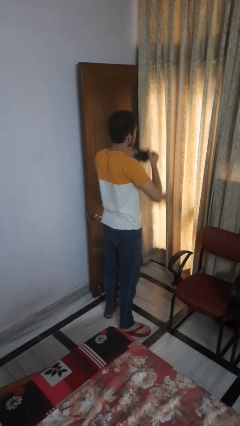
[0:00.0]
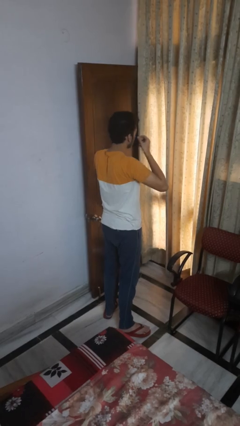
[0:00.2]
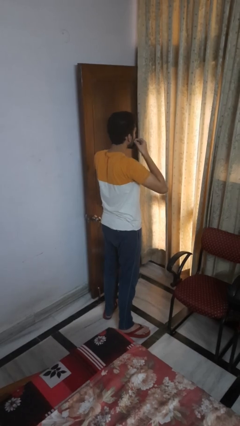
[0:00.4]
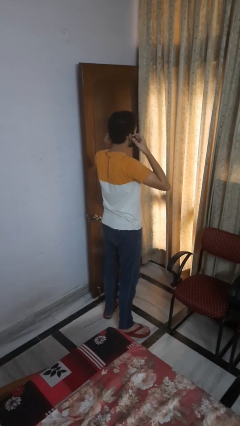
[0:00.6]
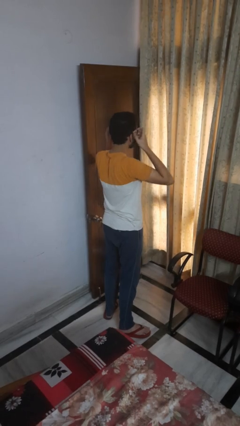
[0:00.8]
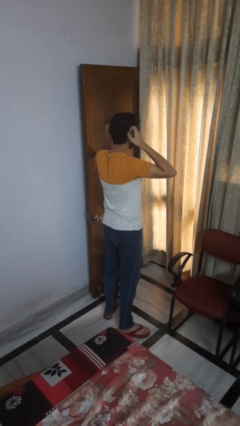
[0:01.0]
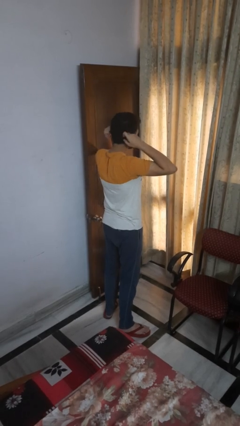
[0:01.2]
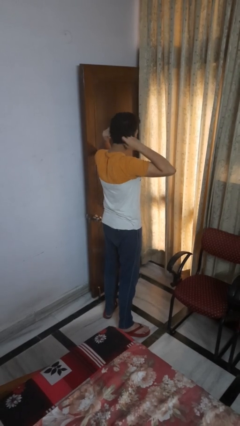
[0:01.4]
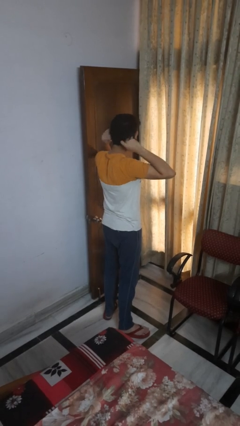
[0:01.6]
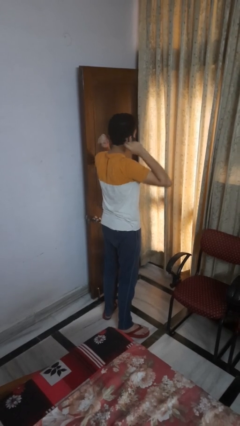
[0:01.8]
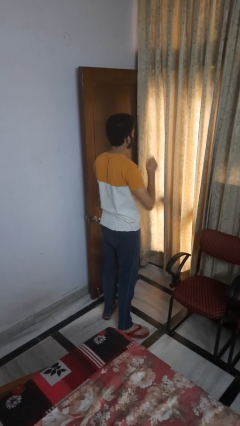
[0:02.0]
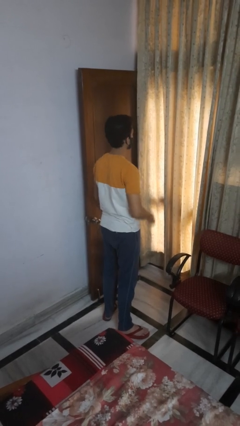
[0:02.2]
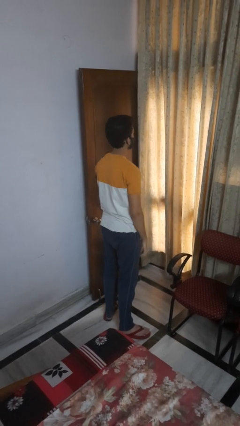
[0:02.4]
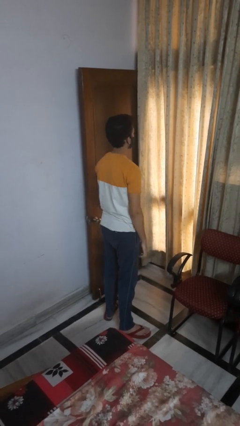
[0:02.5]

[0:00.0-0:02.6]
person puts on facemask

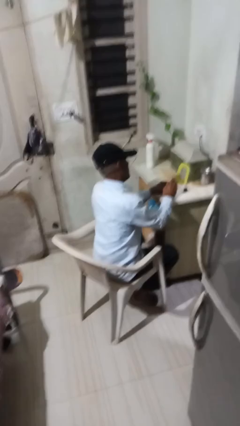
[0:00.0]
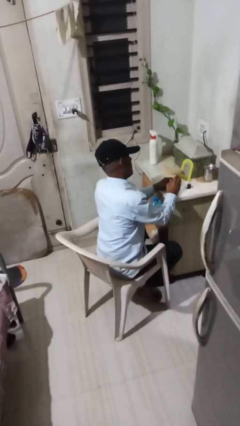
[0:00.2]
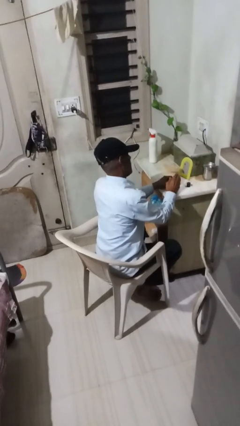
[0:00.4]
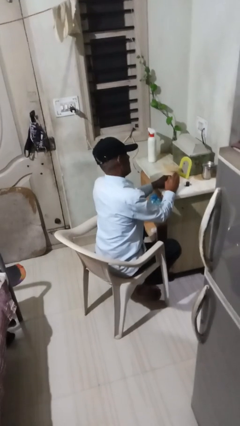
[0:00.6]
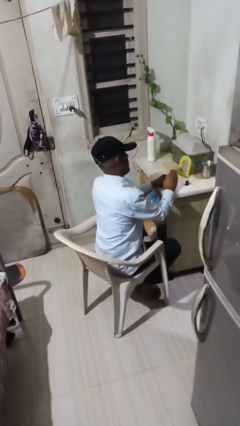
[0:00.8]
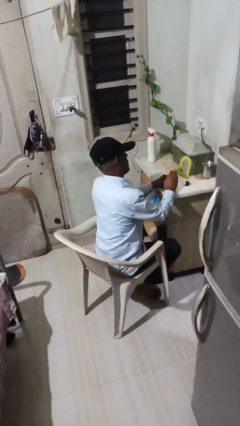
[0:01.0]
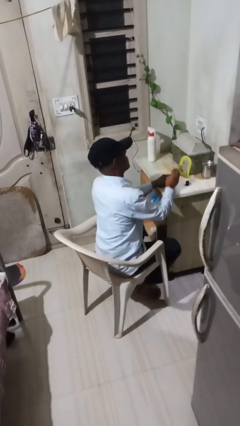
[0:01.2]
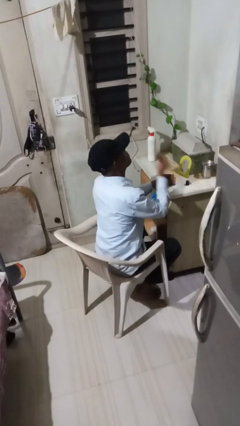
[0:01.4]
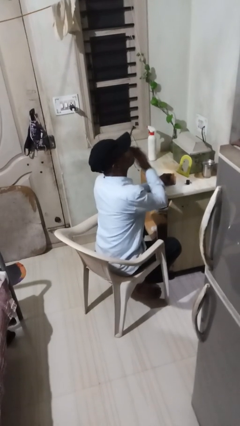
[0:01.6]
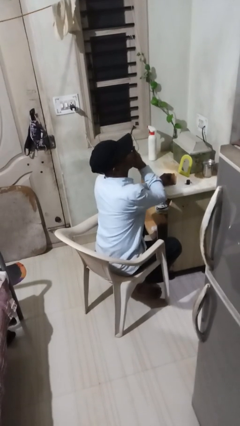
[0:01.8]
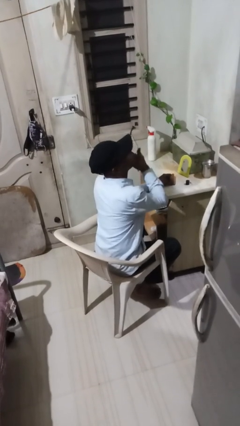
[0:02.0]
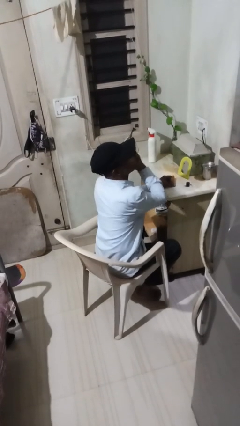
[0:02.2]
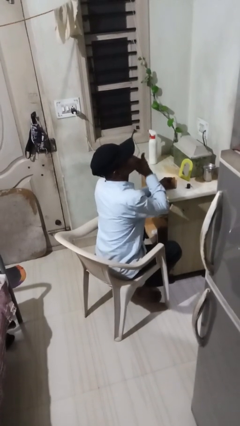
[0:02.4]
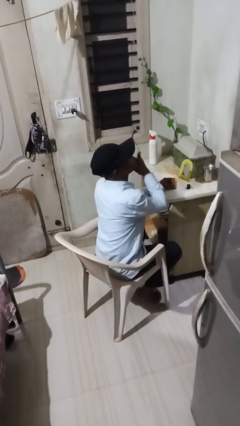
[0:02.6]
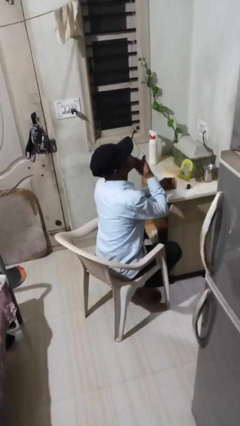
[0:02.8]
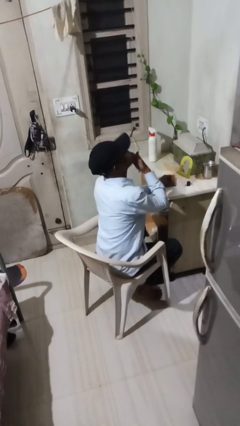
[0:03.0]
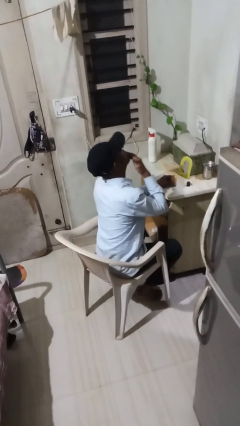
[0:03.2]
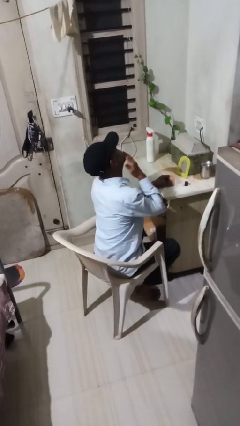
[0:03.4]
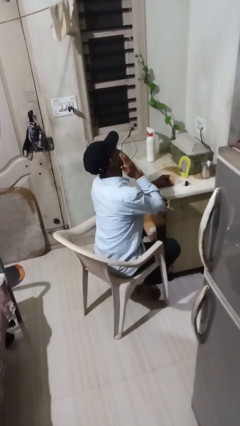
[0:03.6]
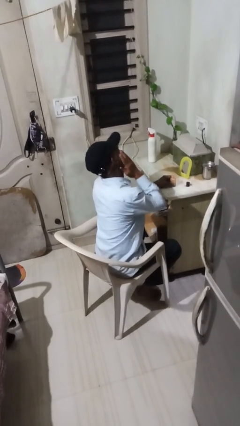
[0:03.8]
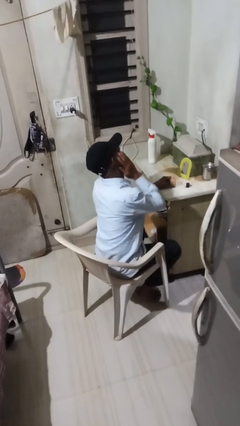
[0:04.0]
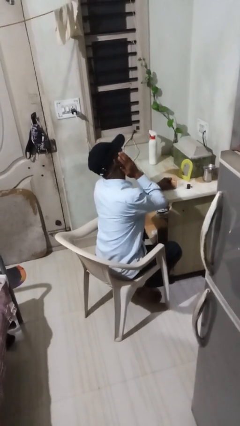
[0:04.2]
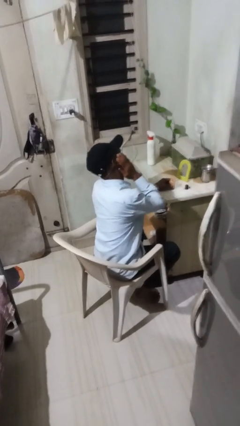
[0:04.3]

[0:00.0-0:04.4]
person applies foundation makeup

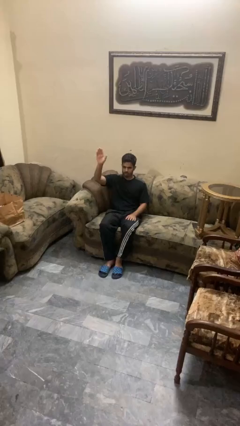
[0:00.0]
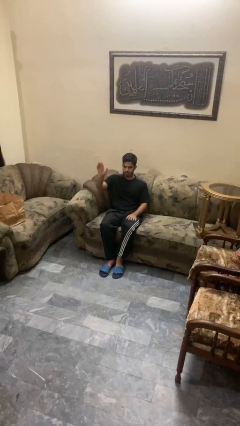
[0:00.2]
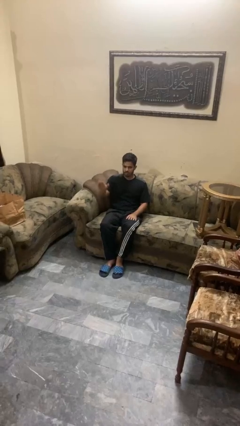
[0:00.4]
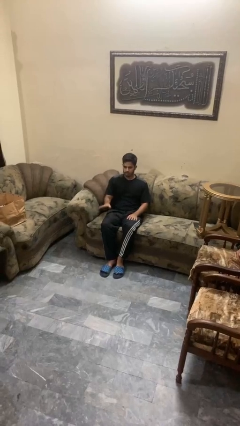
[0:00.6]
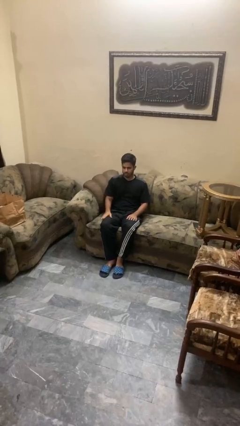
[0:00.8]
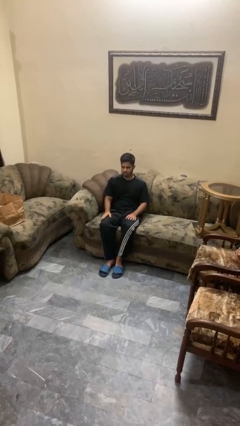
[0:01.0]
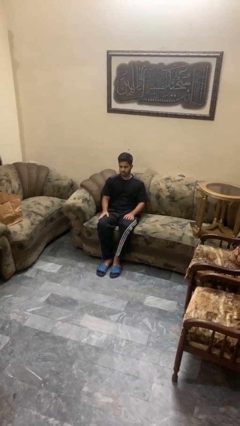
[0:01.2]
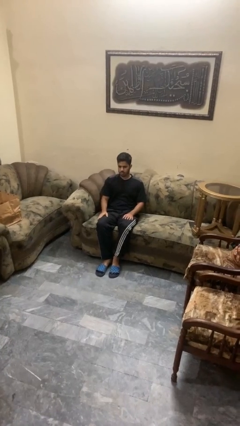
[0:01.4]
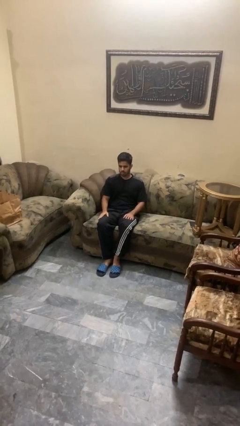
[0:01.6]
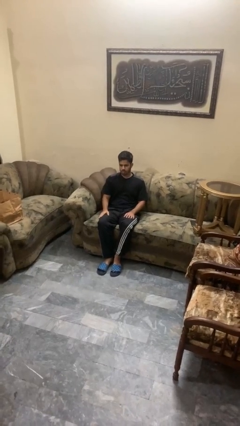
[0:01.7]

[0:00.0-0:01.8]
person gestures lower hand

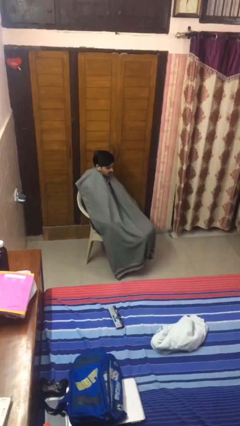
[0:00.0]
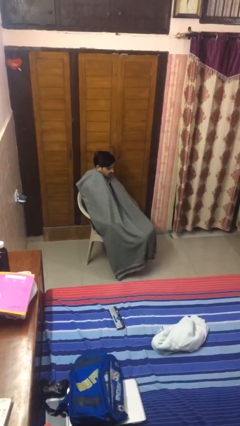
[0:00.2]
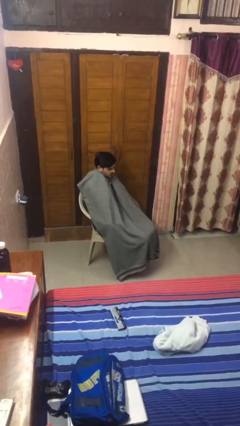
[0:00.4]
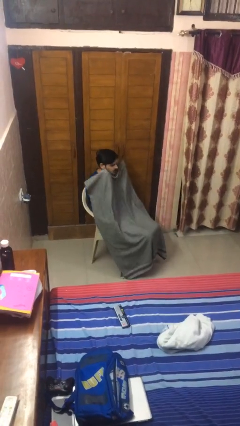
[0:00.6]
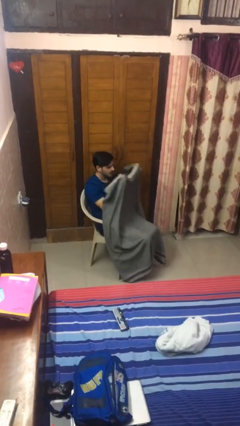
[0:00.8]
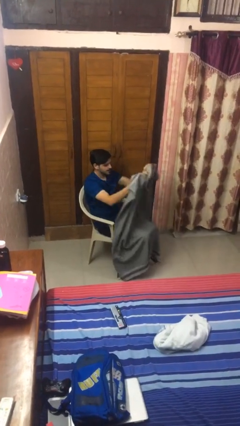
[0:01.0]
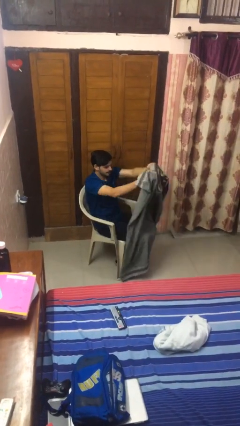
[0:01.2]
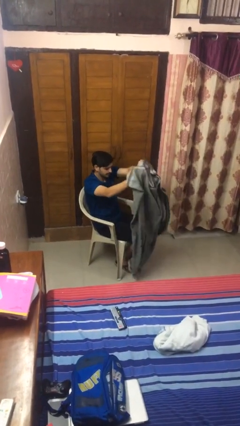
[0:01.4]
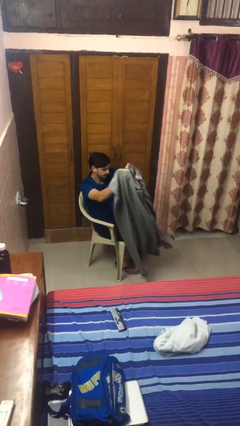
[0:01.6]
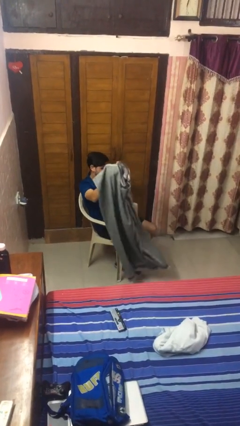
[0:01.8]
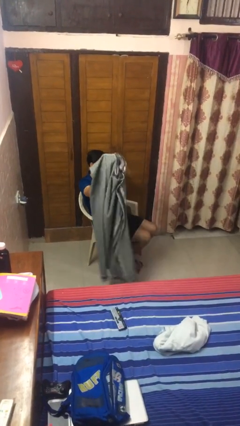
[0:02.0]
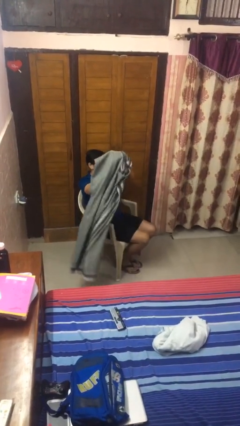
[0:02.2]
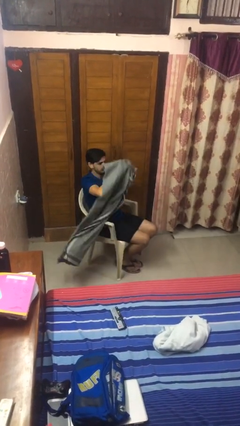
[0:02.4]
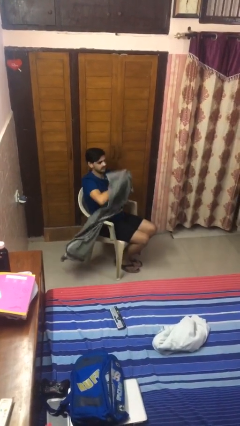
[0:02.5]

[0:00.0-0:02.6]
person uncovers with blanket

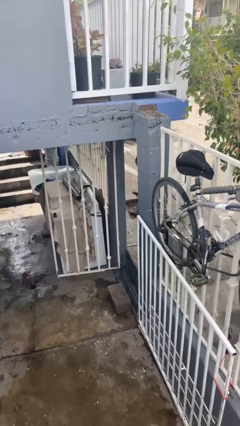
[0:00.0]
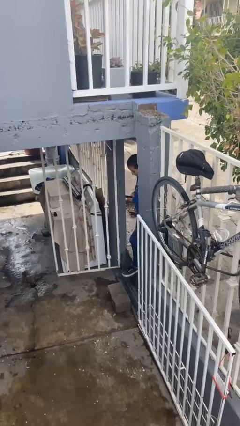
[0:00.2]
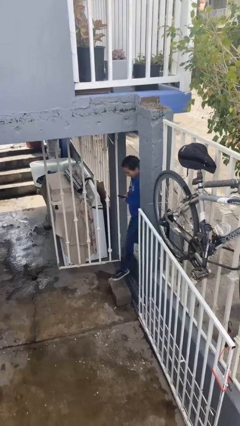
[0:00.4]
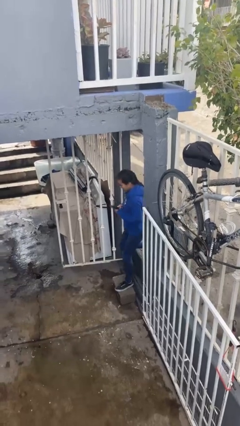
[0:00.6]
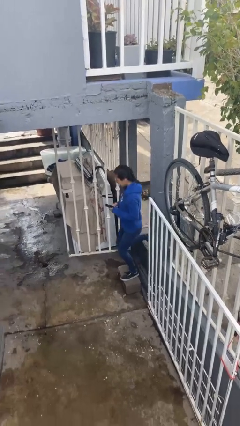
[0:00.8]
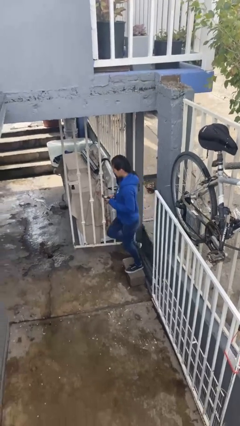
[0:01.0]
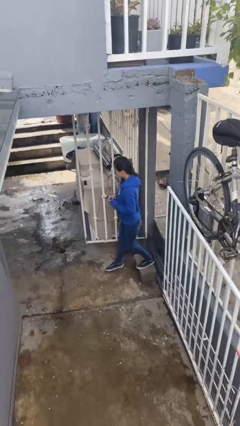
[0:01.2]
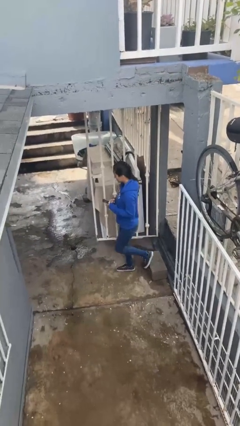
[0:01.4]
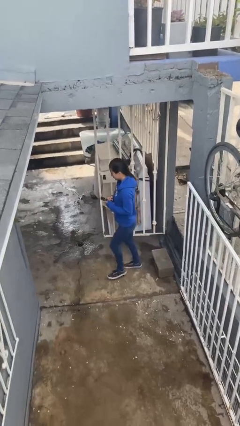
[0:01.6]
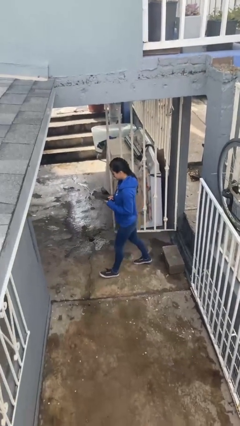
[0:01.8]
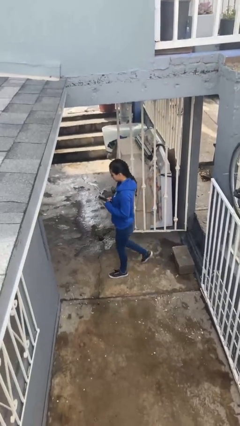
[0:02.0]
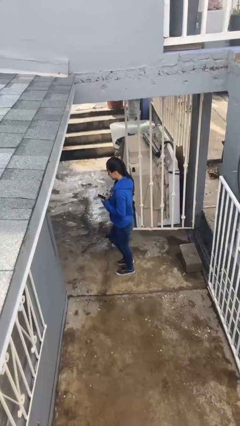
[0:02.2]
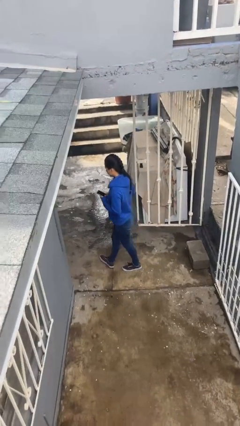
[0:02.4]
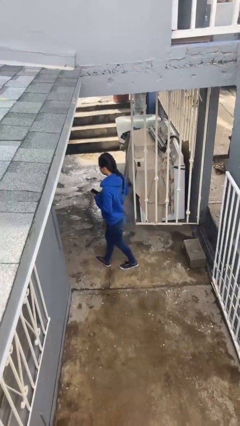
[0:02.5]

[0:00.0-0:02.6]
person enters scene through structure

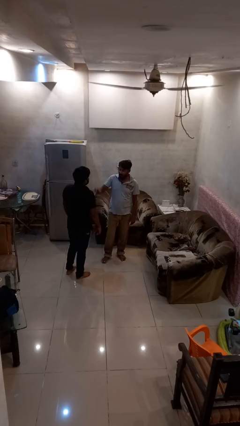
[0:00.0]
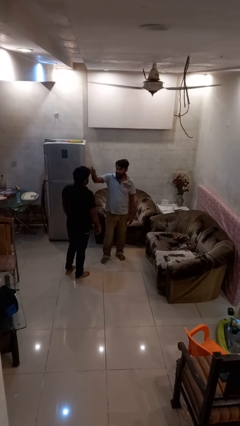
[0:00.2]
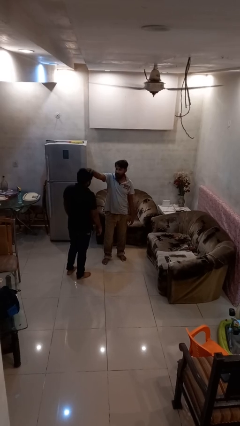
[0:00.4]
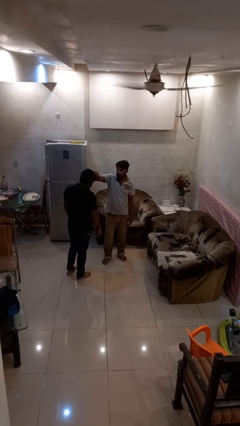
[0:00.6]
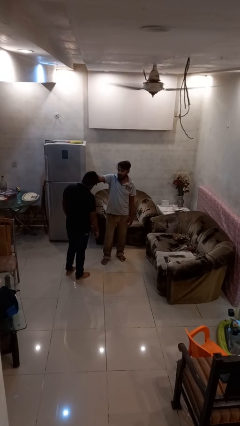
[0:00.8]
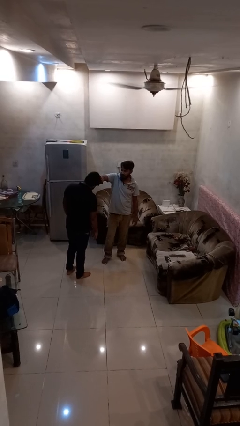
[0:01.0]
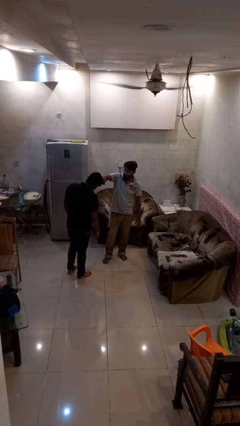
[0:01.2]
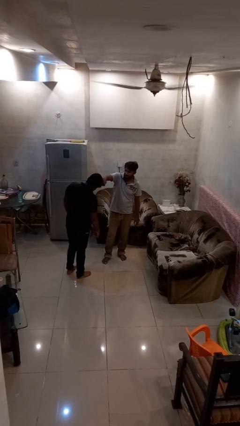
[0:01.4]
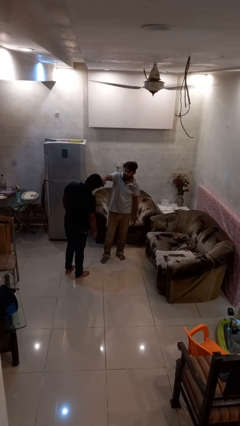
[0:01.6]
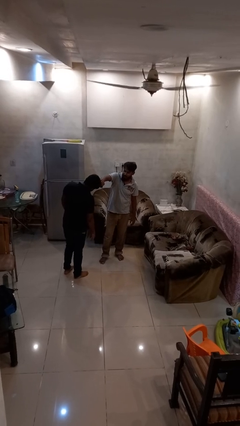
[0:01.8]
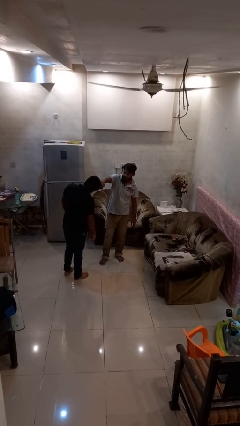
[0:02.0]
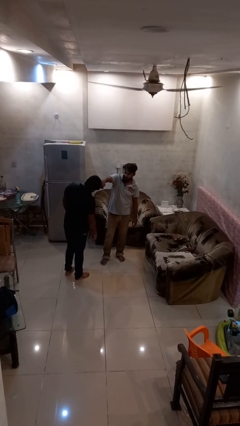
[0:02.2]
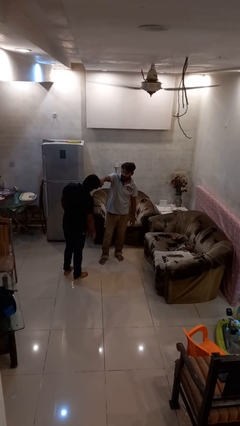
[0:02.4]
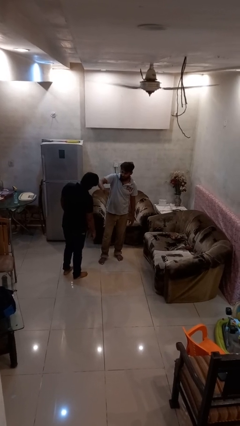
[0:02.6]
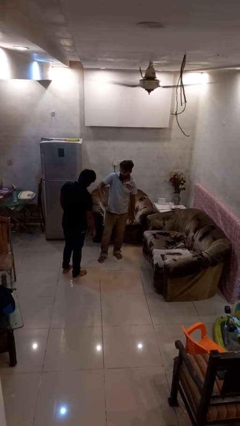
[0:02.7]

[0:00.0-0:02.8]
person grabs person by hair

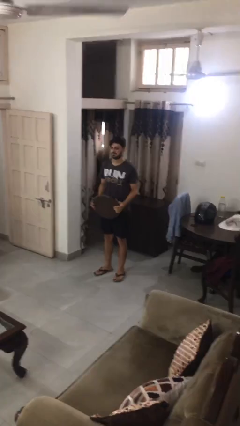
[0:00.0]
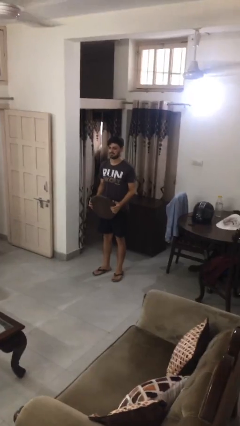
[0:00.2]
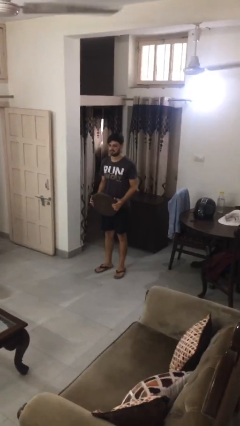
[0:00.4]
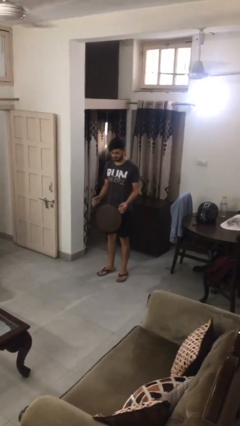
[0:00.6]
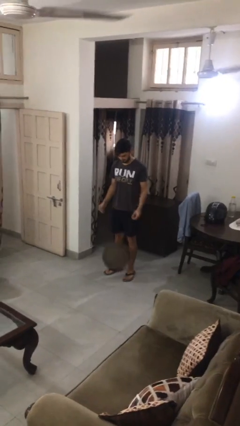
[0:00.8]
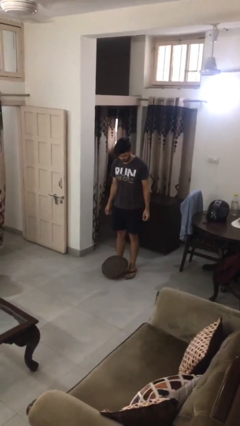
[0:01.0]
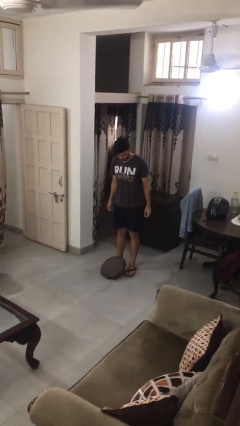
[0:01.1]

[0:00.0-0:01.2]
person drops object
